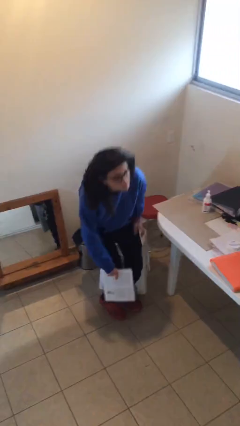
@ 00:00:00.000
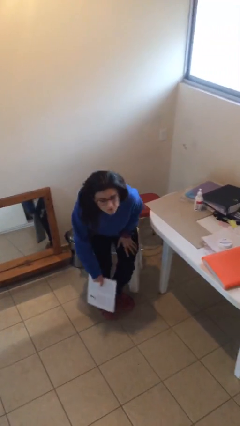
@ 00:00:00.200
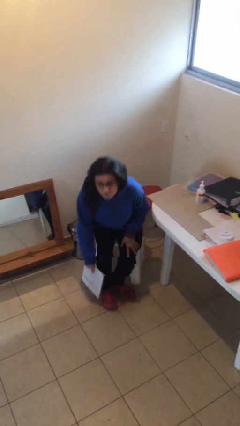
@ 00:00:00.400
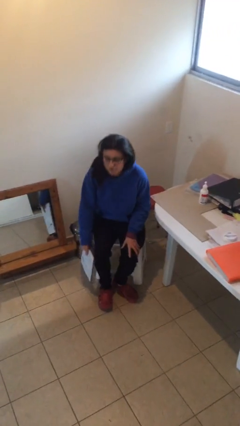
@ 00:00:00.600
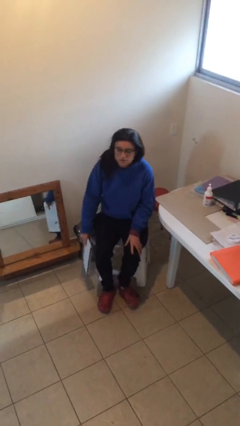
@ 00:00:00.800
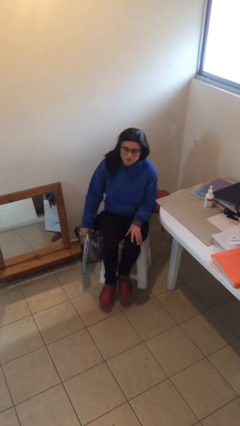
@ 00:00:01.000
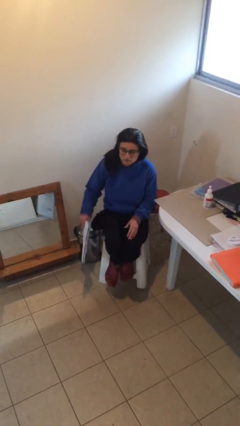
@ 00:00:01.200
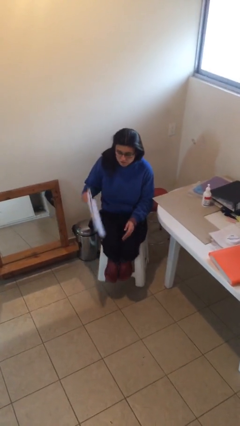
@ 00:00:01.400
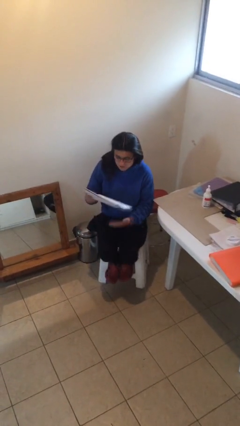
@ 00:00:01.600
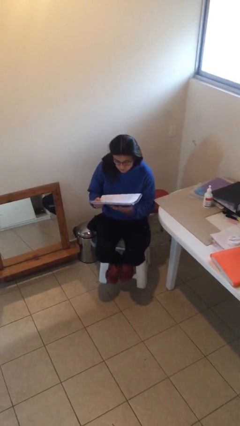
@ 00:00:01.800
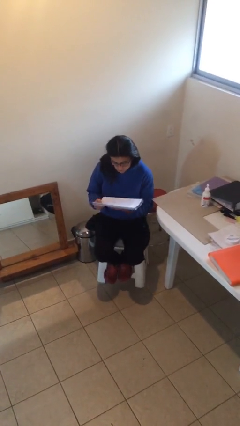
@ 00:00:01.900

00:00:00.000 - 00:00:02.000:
person sits down

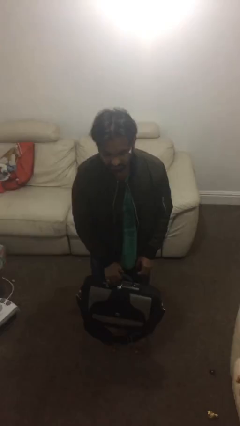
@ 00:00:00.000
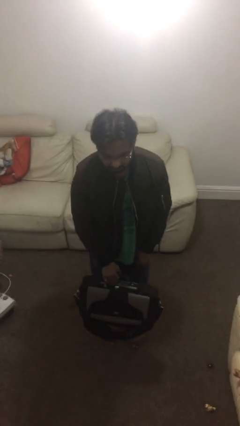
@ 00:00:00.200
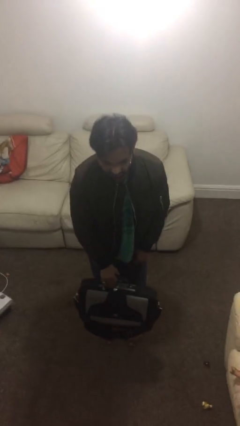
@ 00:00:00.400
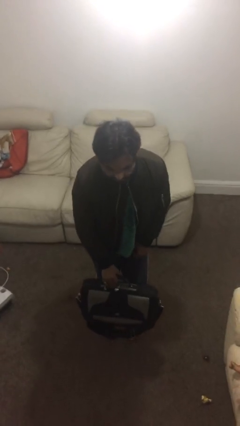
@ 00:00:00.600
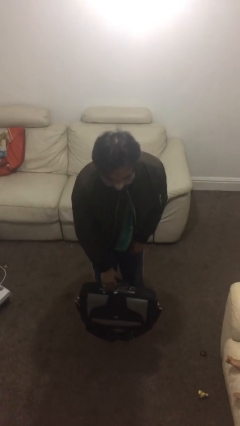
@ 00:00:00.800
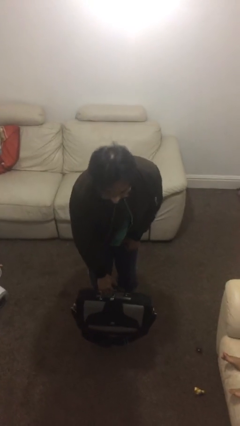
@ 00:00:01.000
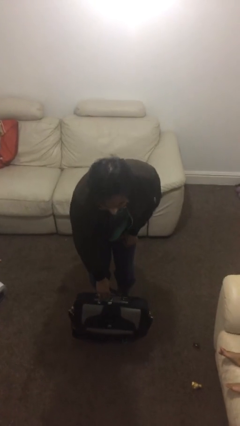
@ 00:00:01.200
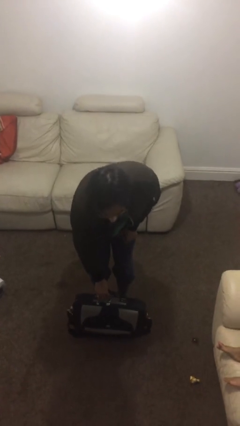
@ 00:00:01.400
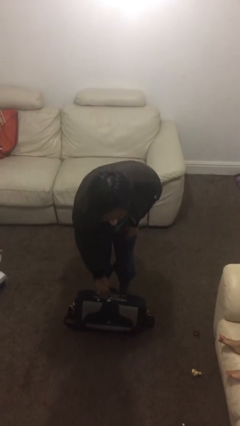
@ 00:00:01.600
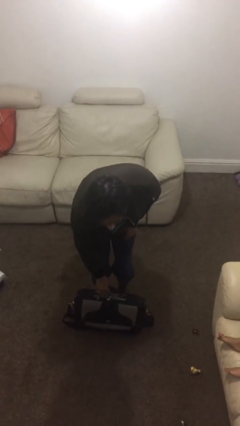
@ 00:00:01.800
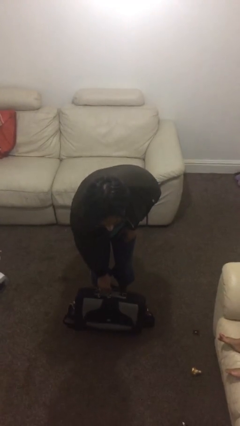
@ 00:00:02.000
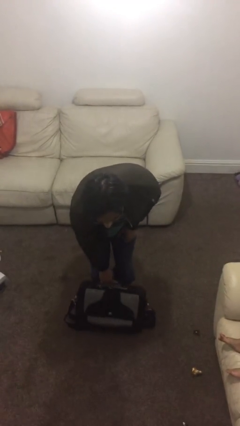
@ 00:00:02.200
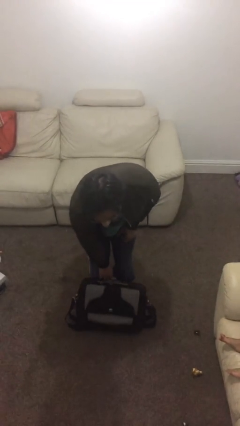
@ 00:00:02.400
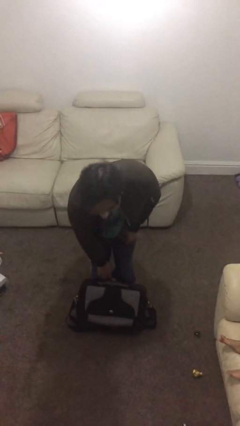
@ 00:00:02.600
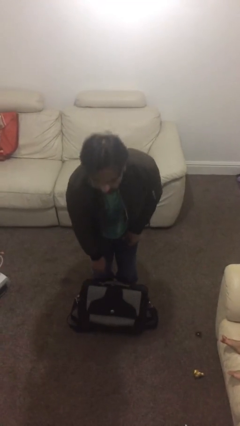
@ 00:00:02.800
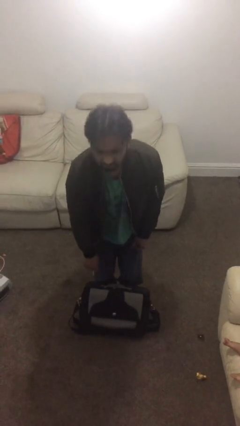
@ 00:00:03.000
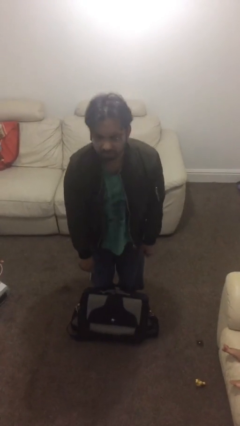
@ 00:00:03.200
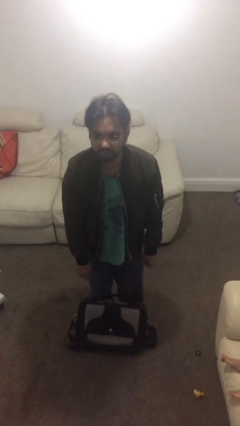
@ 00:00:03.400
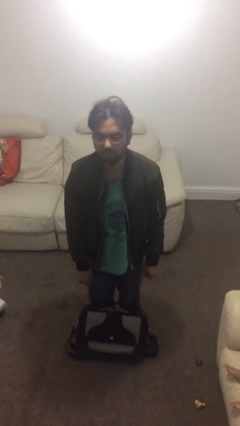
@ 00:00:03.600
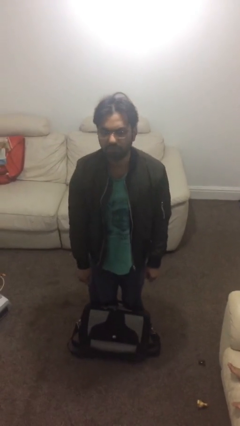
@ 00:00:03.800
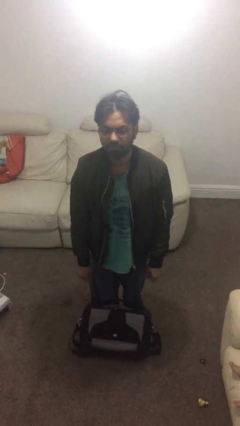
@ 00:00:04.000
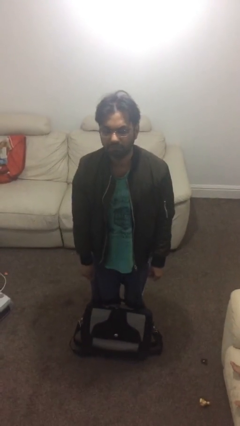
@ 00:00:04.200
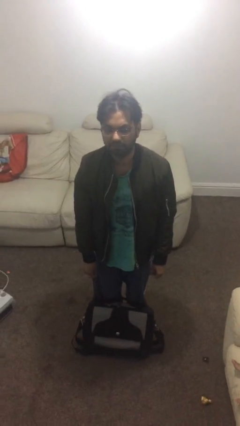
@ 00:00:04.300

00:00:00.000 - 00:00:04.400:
person puts down object on floor

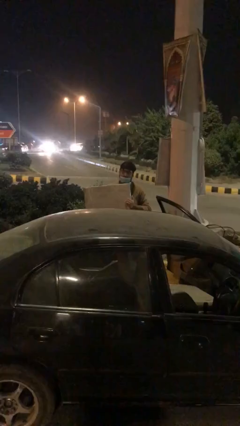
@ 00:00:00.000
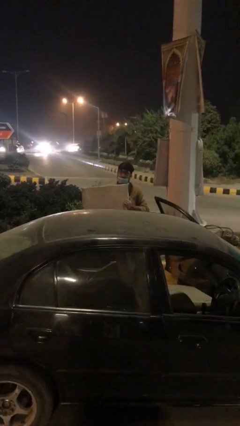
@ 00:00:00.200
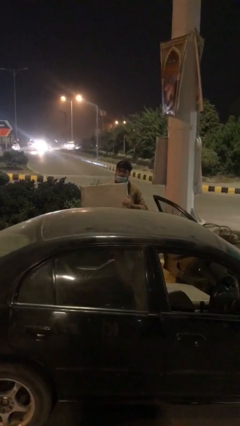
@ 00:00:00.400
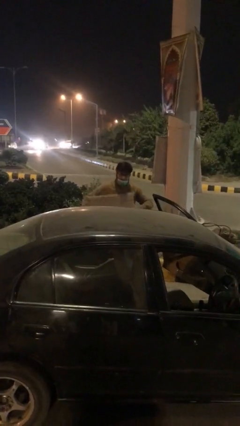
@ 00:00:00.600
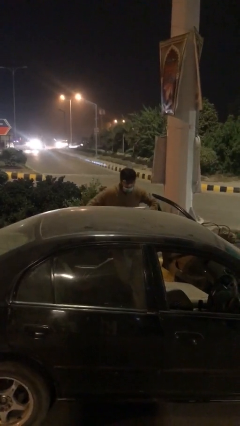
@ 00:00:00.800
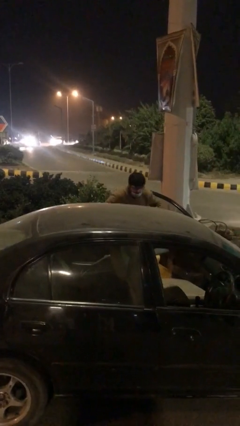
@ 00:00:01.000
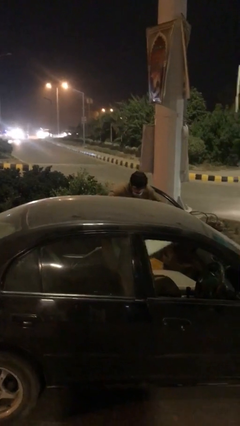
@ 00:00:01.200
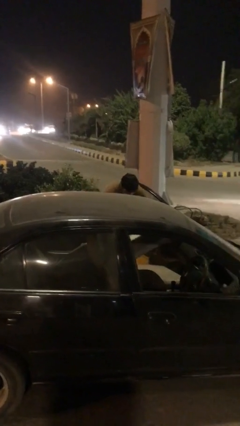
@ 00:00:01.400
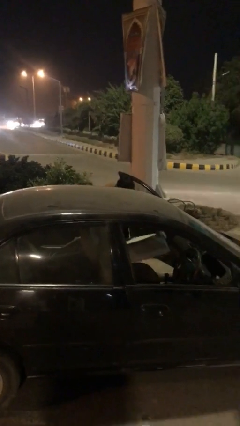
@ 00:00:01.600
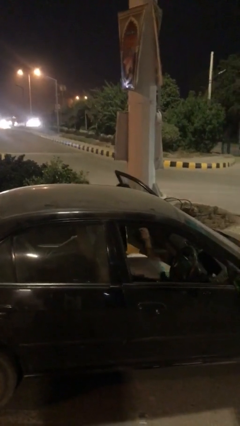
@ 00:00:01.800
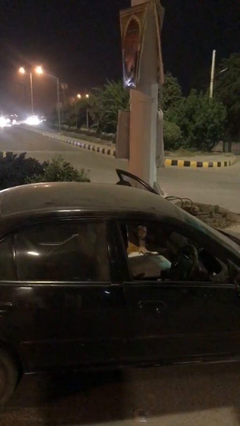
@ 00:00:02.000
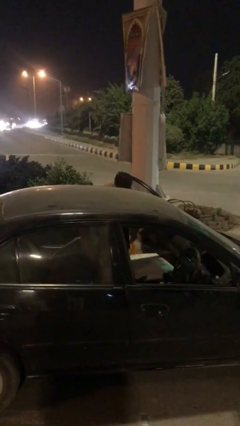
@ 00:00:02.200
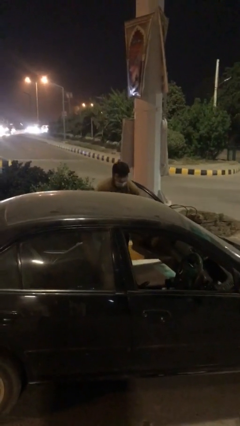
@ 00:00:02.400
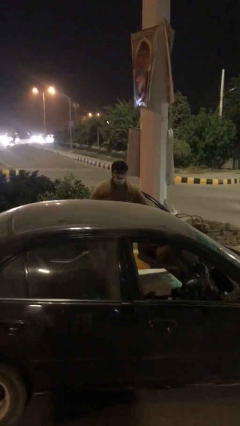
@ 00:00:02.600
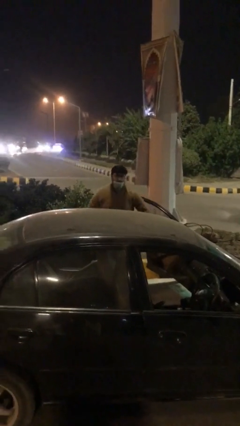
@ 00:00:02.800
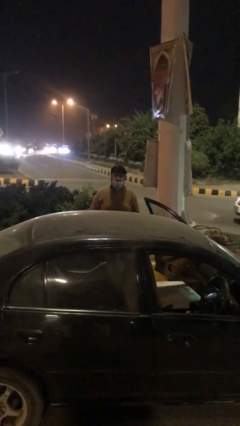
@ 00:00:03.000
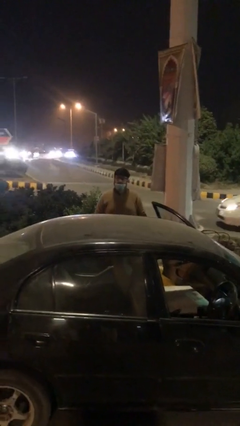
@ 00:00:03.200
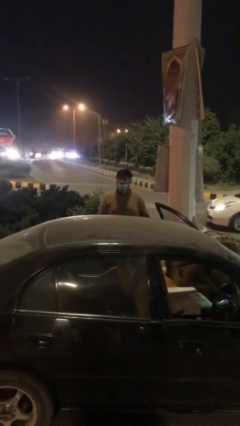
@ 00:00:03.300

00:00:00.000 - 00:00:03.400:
person loads car

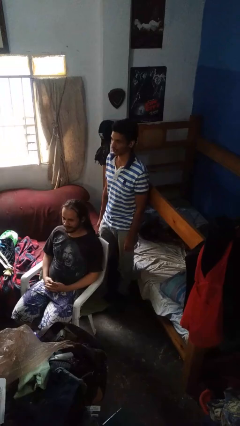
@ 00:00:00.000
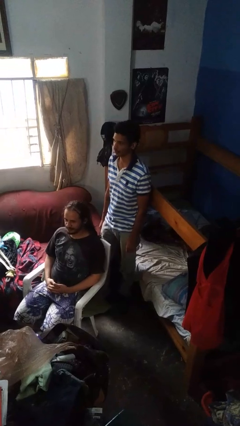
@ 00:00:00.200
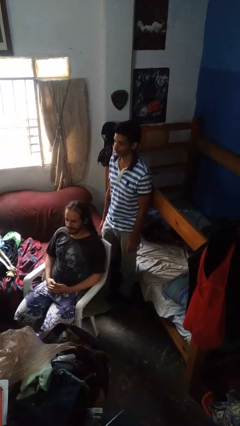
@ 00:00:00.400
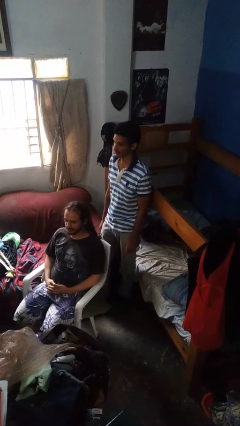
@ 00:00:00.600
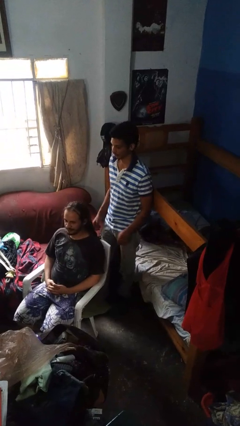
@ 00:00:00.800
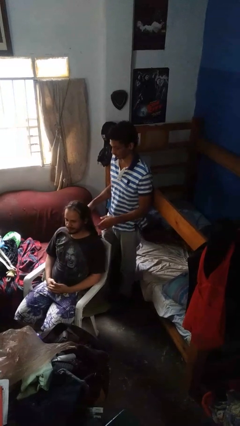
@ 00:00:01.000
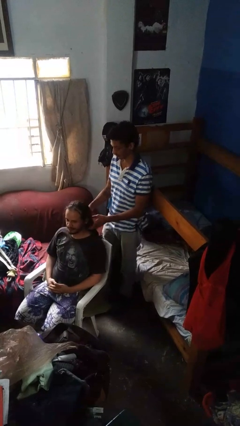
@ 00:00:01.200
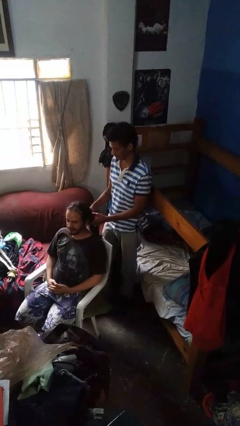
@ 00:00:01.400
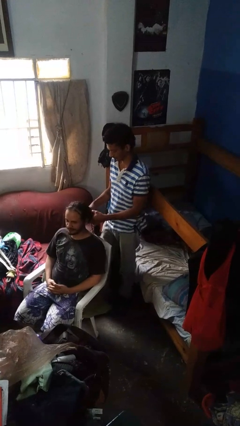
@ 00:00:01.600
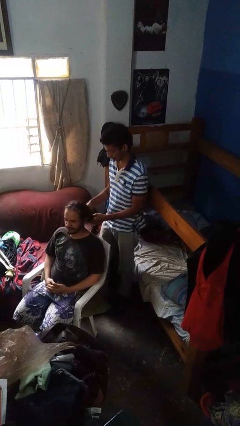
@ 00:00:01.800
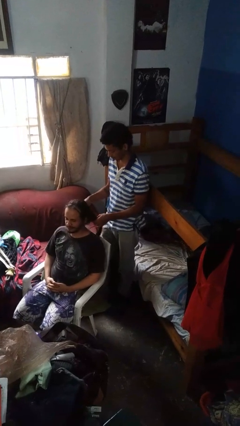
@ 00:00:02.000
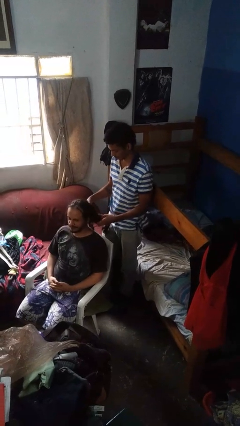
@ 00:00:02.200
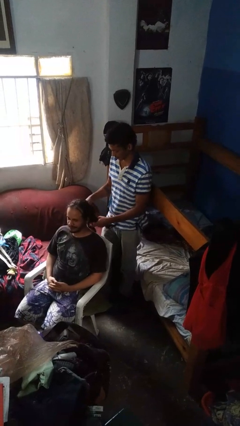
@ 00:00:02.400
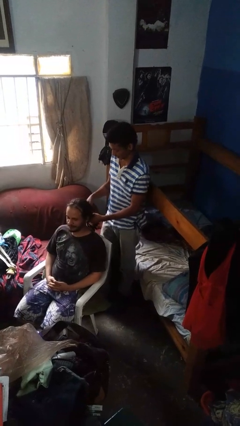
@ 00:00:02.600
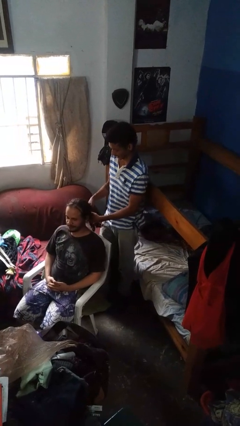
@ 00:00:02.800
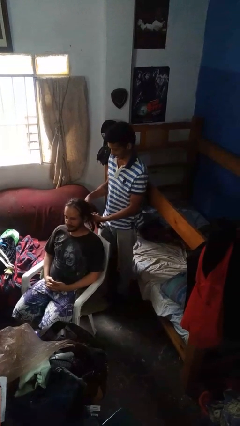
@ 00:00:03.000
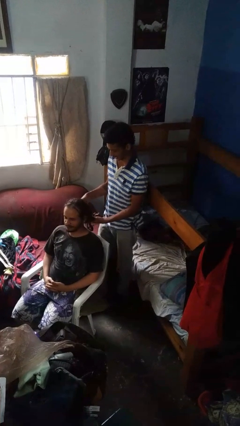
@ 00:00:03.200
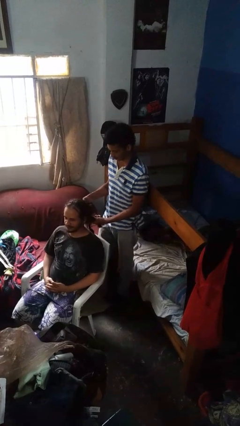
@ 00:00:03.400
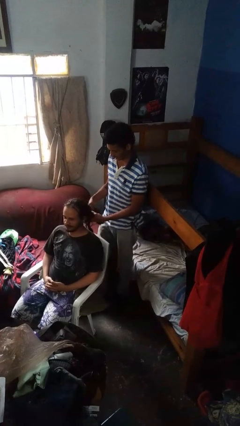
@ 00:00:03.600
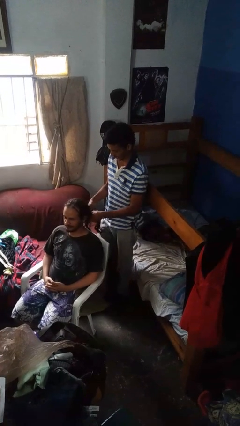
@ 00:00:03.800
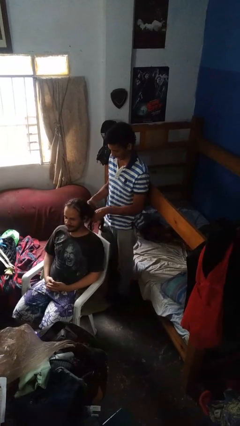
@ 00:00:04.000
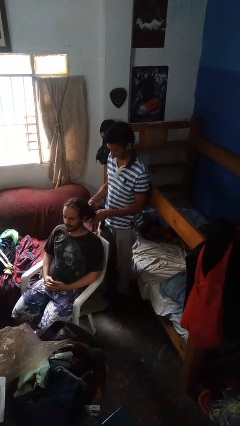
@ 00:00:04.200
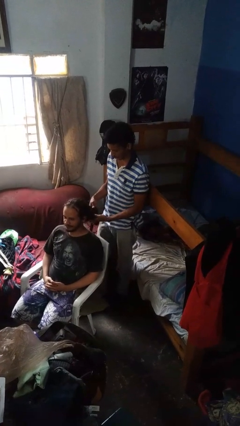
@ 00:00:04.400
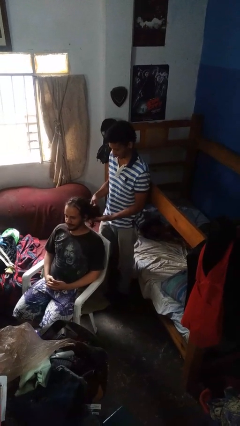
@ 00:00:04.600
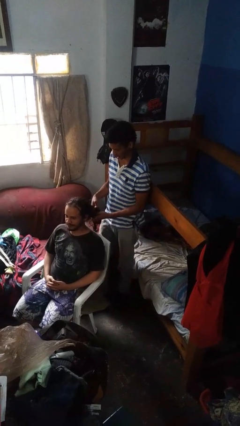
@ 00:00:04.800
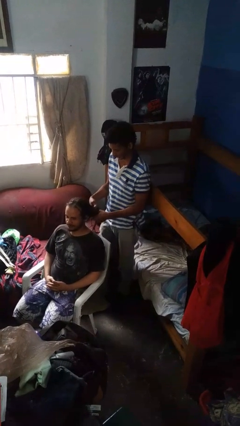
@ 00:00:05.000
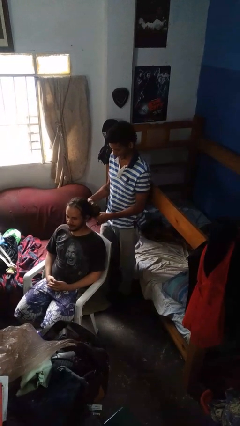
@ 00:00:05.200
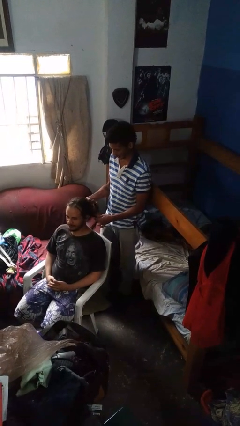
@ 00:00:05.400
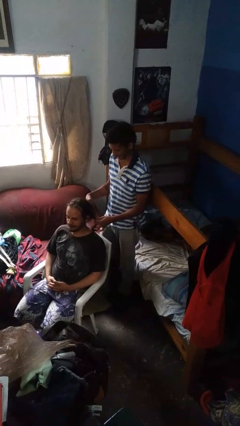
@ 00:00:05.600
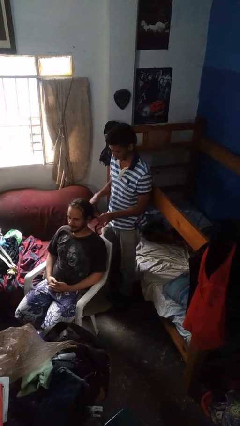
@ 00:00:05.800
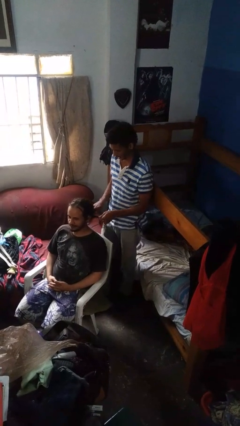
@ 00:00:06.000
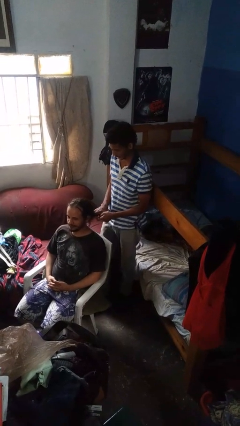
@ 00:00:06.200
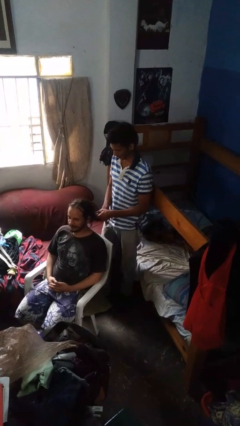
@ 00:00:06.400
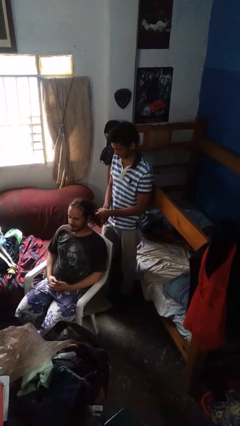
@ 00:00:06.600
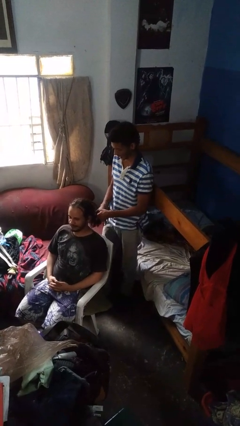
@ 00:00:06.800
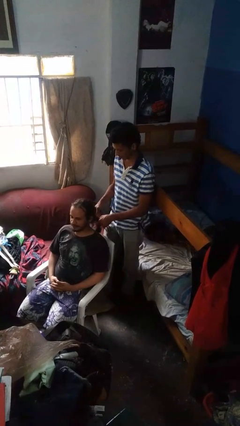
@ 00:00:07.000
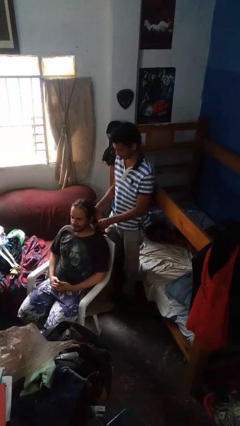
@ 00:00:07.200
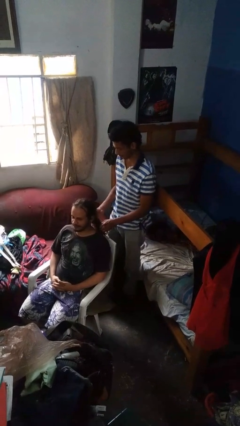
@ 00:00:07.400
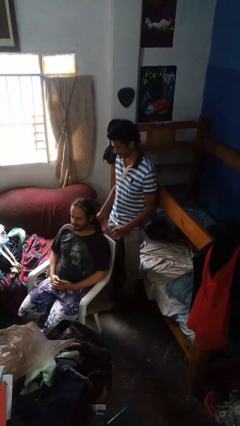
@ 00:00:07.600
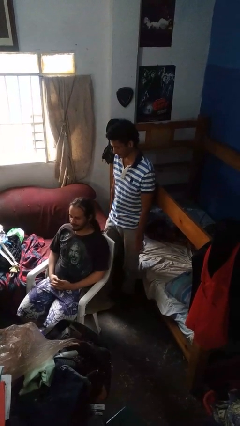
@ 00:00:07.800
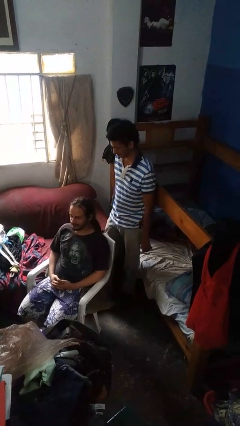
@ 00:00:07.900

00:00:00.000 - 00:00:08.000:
person braids hair of person
